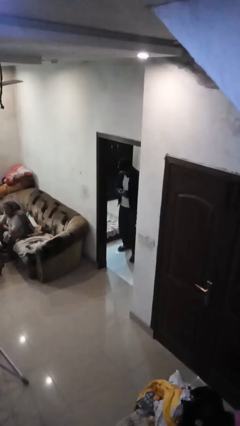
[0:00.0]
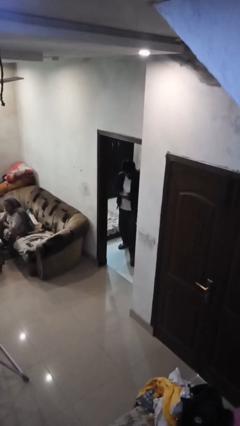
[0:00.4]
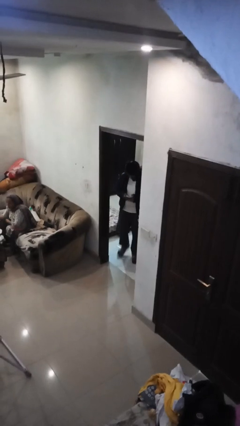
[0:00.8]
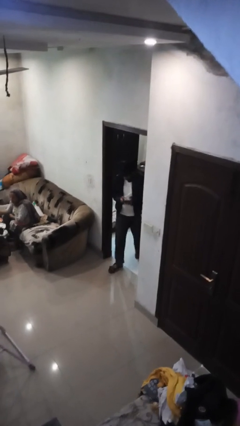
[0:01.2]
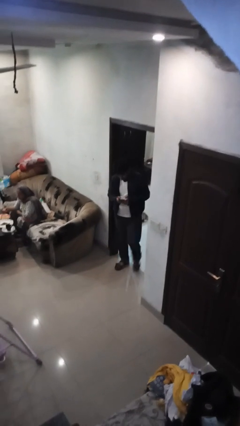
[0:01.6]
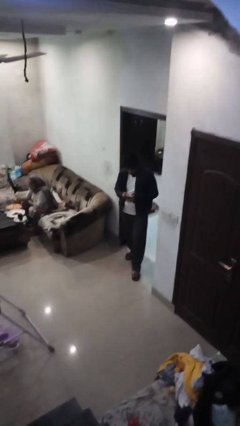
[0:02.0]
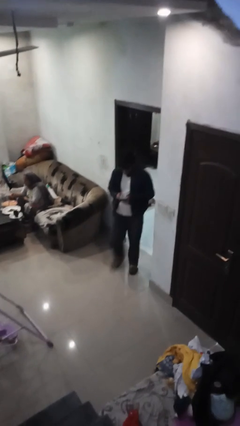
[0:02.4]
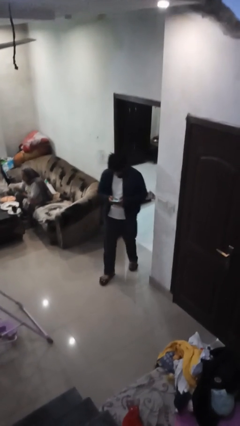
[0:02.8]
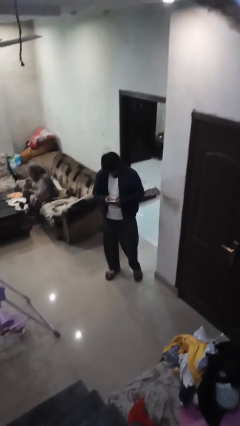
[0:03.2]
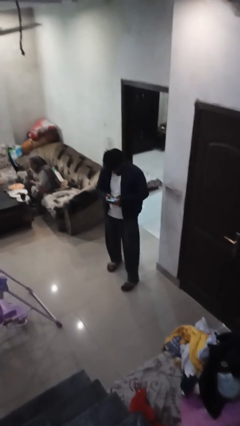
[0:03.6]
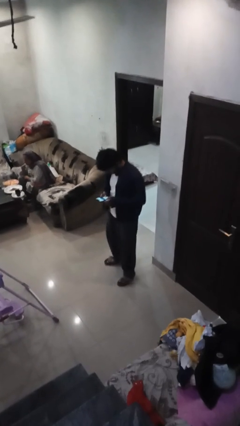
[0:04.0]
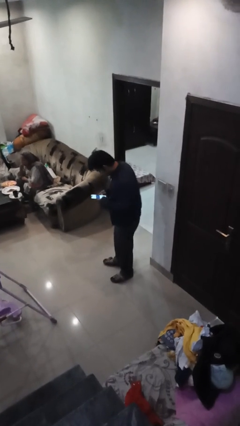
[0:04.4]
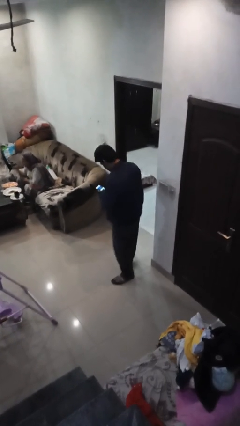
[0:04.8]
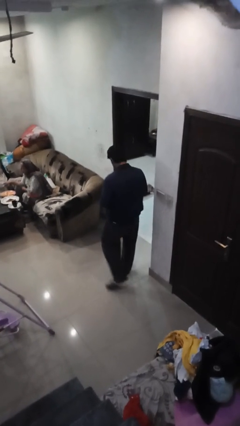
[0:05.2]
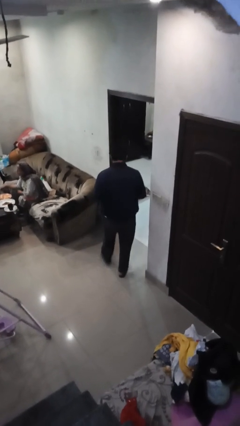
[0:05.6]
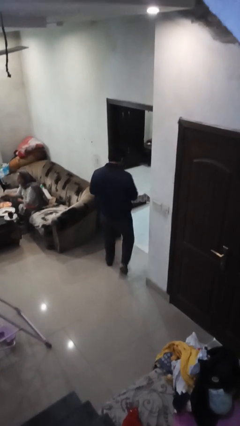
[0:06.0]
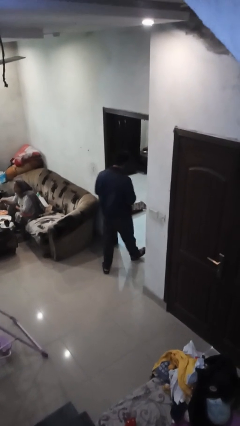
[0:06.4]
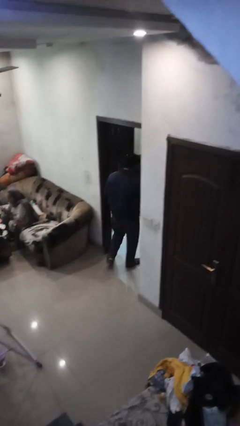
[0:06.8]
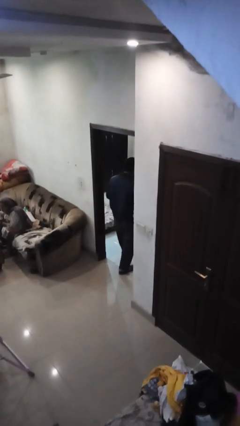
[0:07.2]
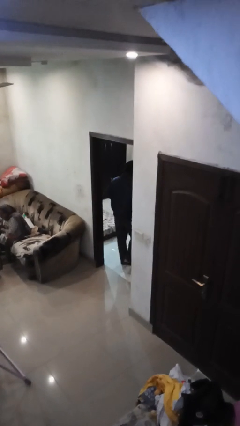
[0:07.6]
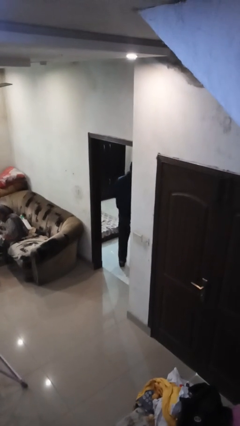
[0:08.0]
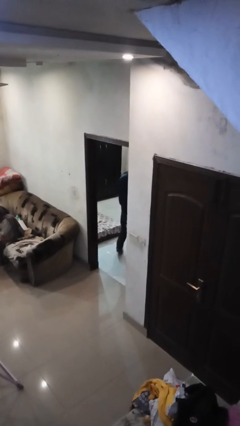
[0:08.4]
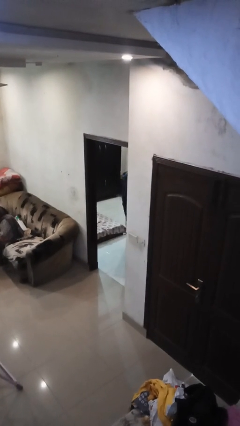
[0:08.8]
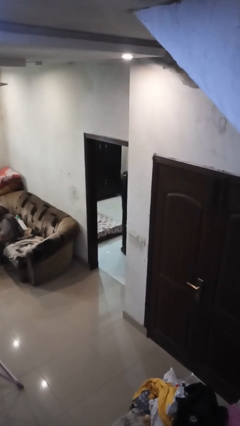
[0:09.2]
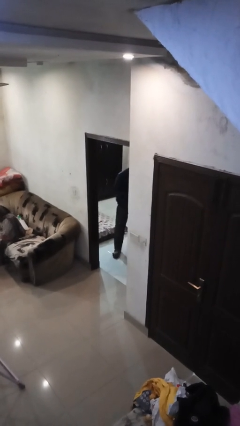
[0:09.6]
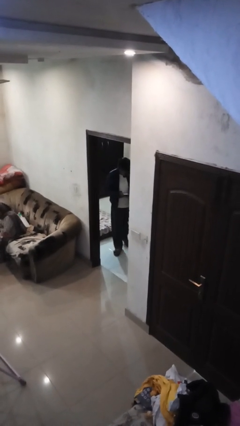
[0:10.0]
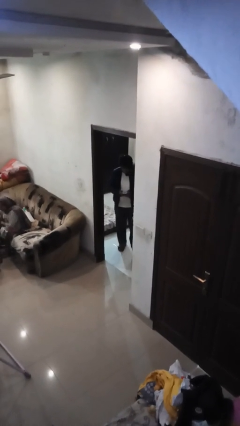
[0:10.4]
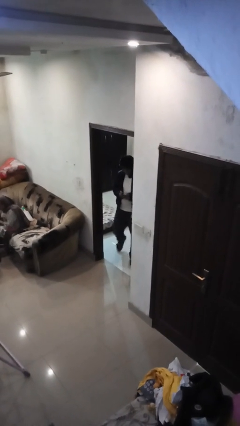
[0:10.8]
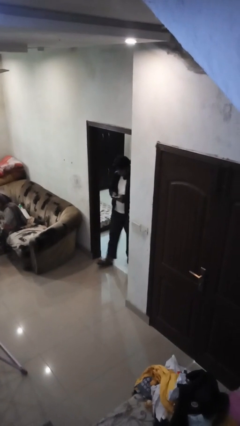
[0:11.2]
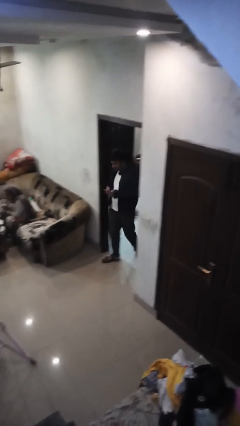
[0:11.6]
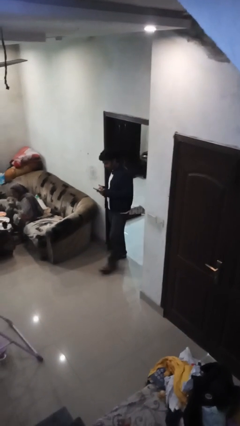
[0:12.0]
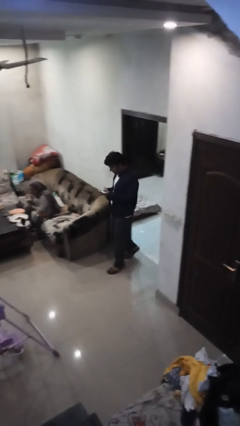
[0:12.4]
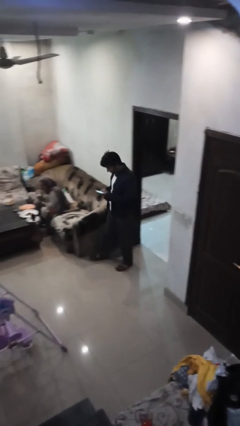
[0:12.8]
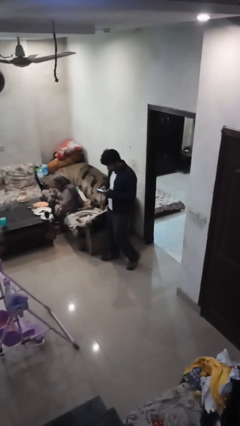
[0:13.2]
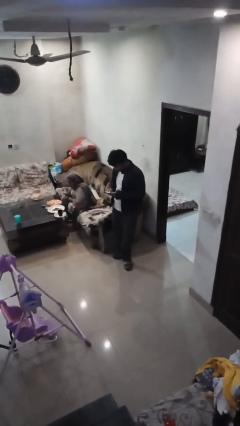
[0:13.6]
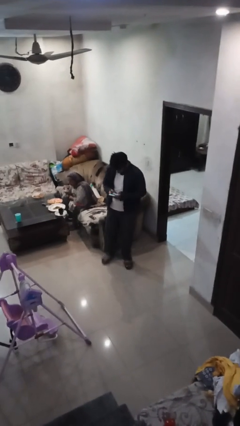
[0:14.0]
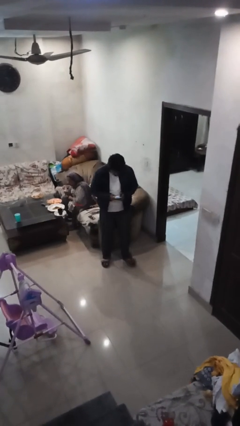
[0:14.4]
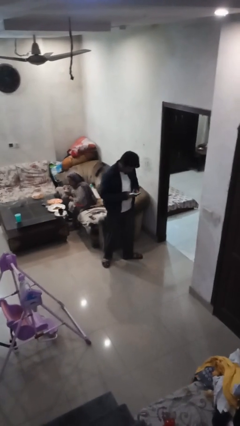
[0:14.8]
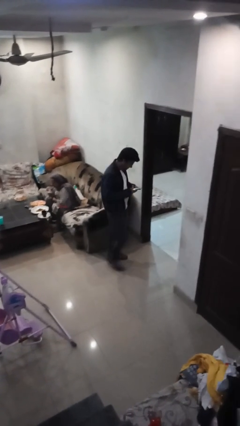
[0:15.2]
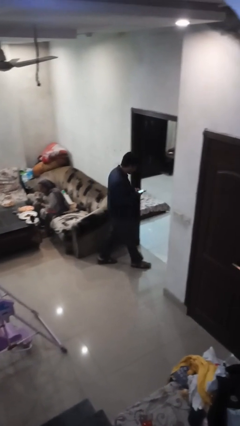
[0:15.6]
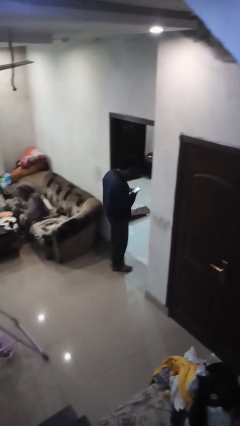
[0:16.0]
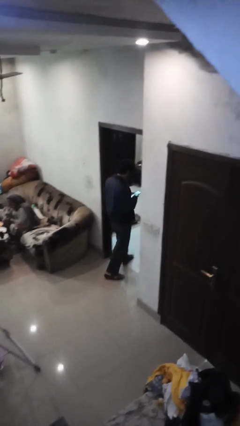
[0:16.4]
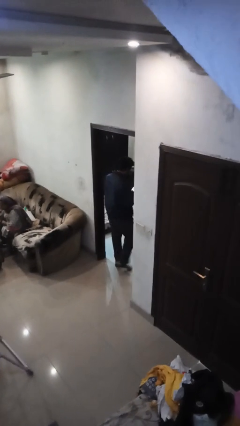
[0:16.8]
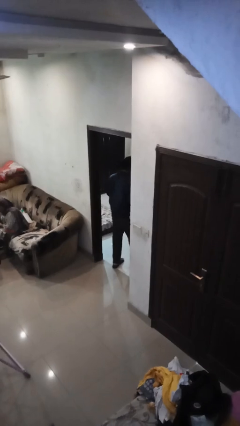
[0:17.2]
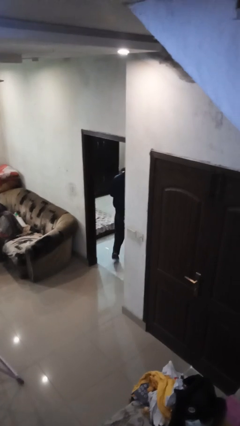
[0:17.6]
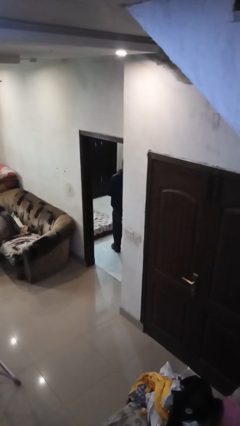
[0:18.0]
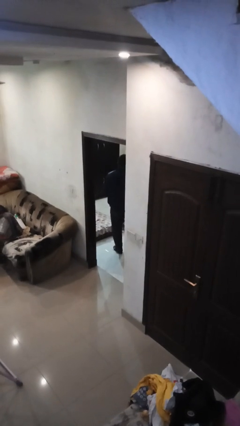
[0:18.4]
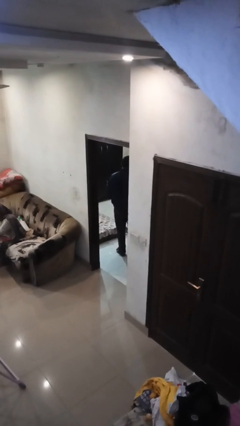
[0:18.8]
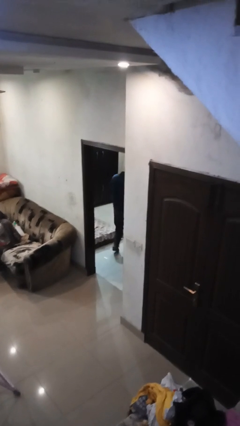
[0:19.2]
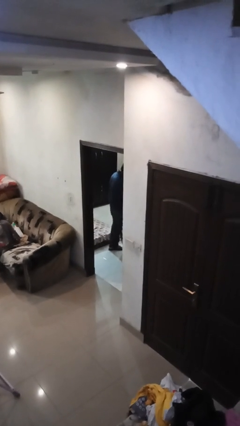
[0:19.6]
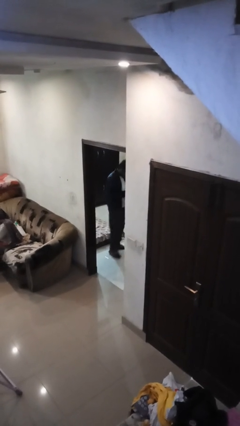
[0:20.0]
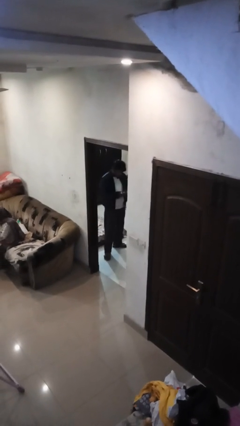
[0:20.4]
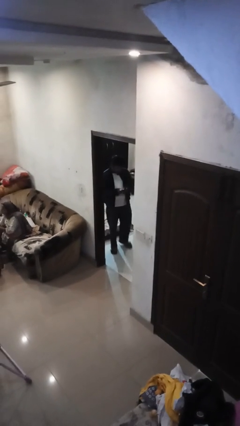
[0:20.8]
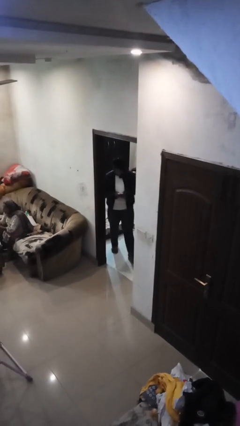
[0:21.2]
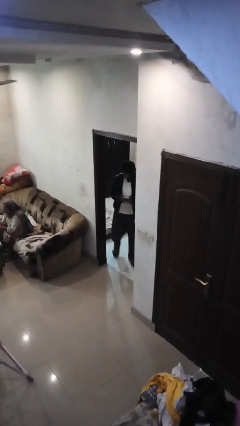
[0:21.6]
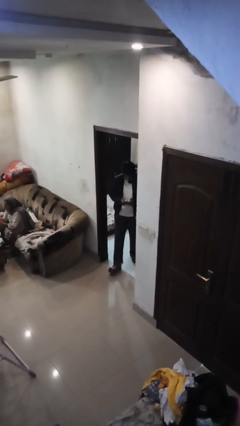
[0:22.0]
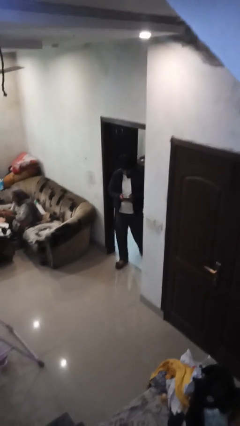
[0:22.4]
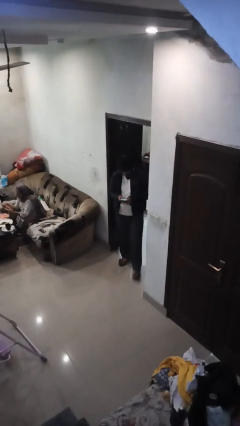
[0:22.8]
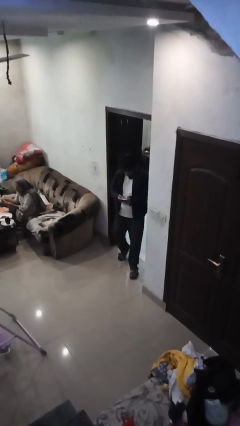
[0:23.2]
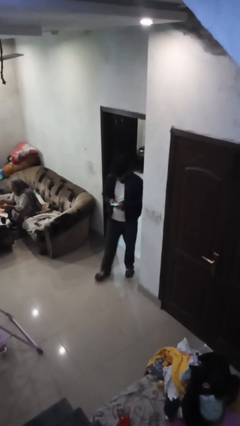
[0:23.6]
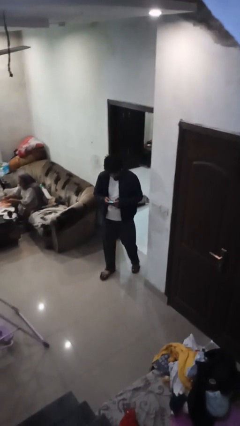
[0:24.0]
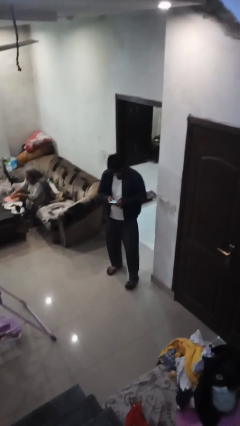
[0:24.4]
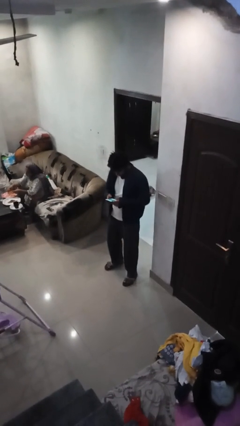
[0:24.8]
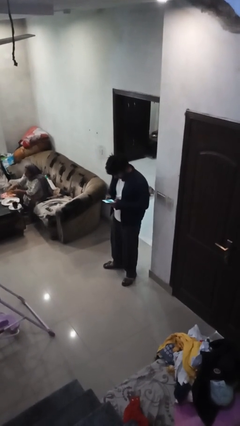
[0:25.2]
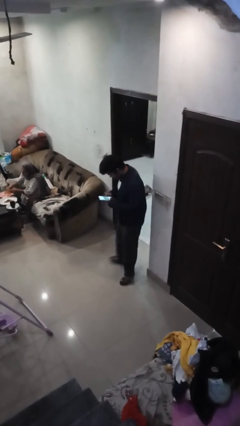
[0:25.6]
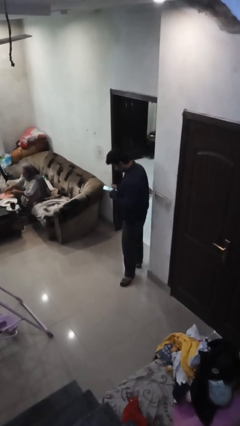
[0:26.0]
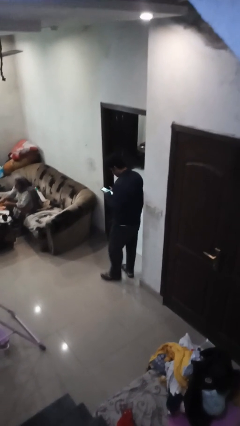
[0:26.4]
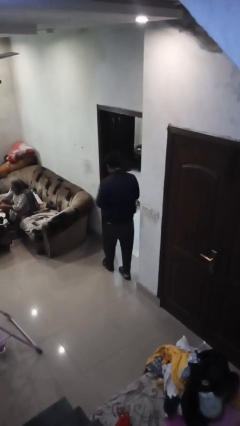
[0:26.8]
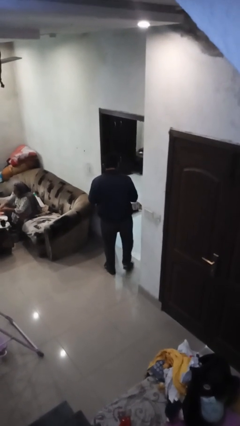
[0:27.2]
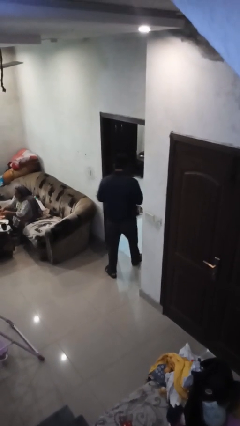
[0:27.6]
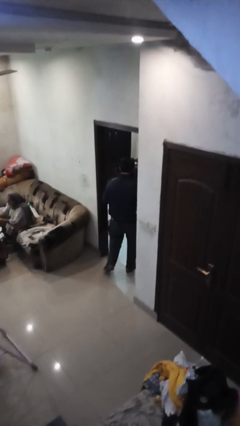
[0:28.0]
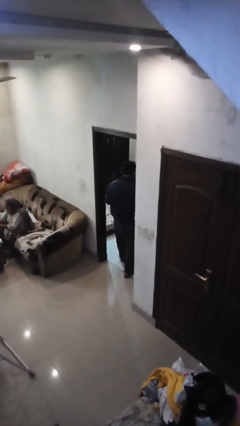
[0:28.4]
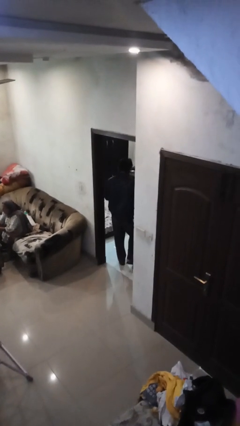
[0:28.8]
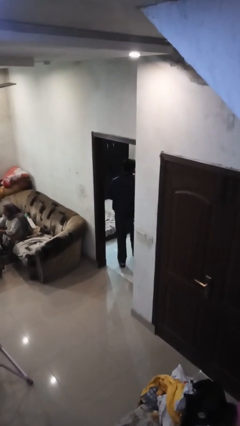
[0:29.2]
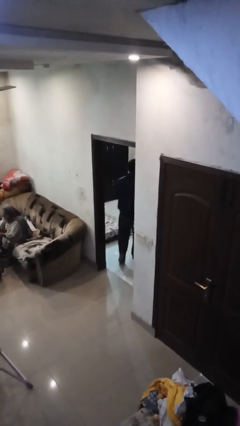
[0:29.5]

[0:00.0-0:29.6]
person texts on phone

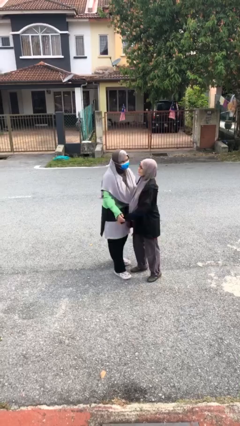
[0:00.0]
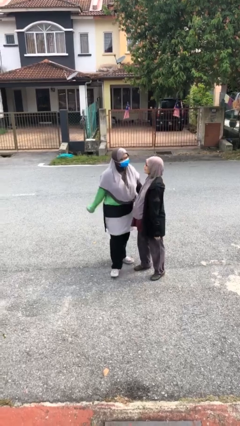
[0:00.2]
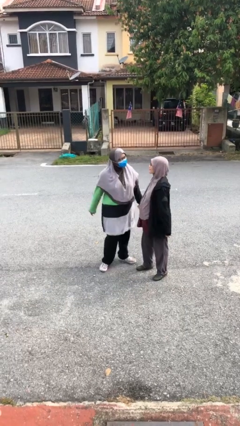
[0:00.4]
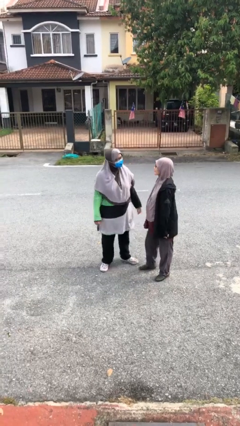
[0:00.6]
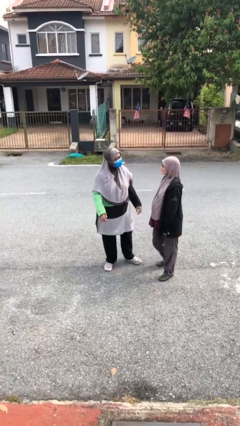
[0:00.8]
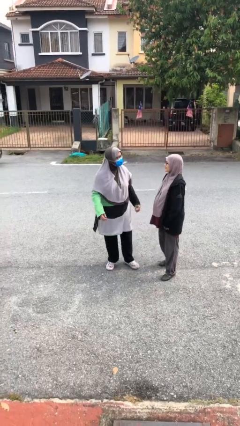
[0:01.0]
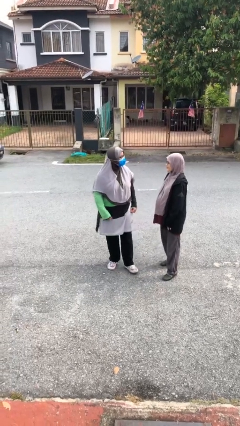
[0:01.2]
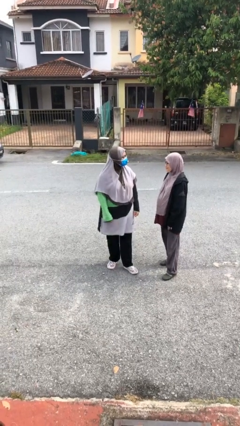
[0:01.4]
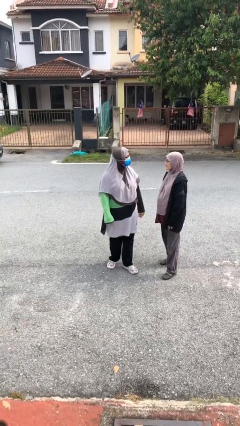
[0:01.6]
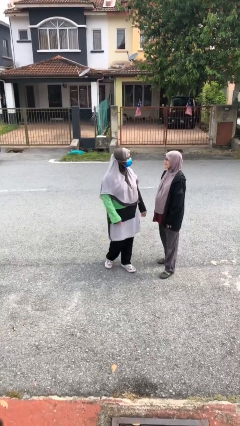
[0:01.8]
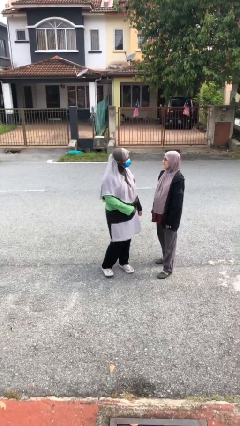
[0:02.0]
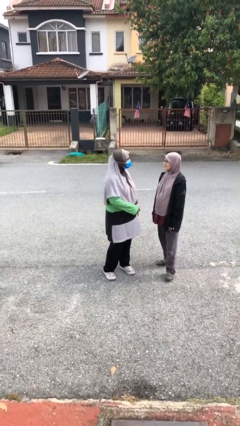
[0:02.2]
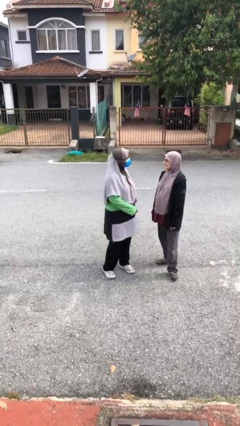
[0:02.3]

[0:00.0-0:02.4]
person talks to person

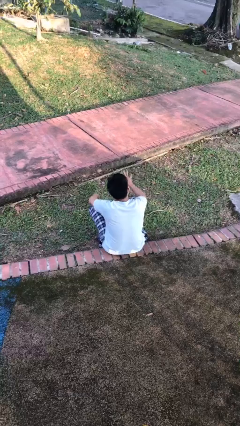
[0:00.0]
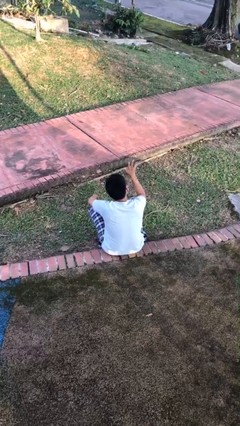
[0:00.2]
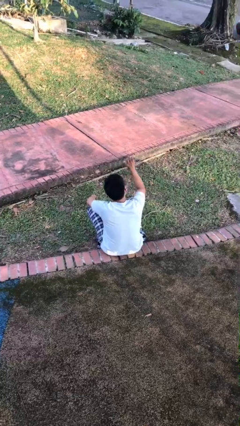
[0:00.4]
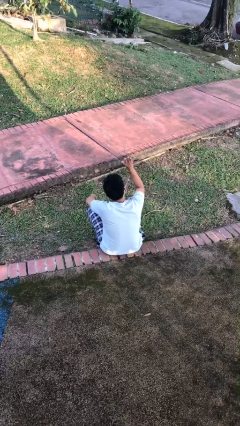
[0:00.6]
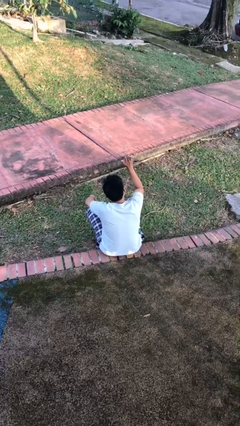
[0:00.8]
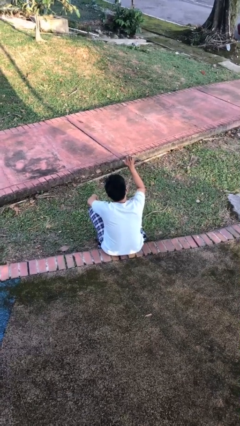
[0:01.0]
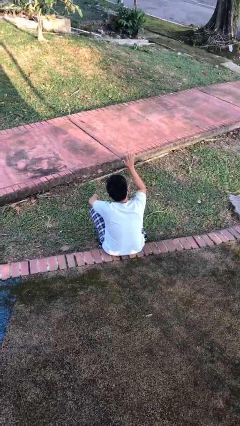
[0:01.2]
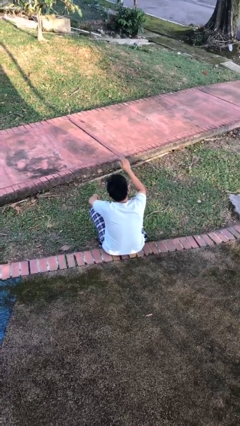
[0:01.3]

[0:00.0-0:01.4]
person gestures stop
